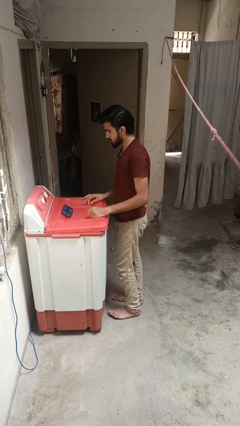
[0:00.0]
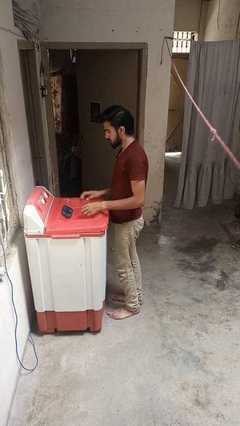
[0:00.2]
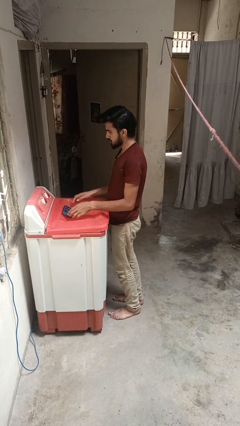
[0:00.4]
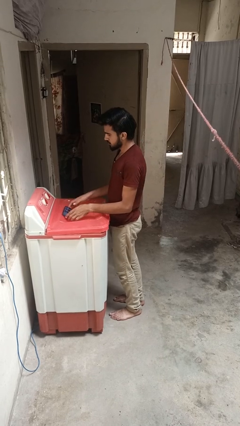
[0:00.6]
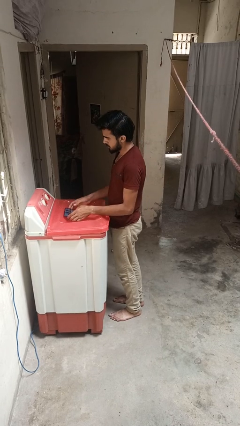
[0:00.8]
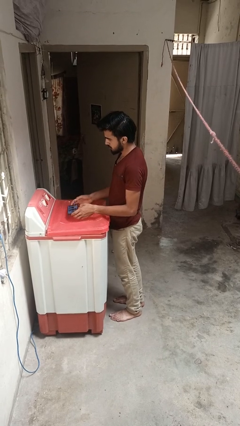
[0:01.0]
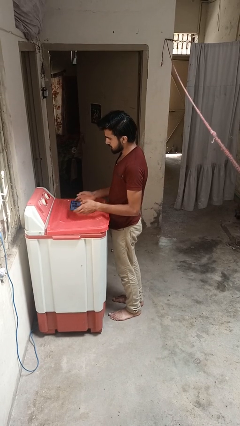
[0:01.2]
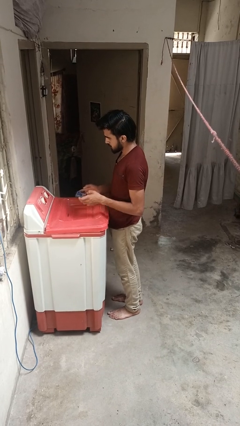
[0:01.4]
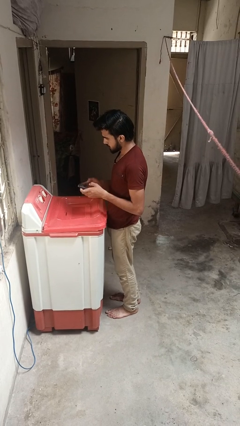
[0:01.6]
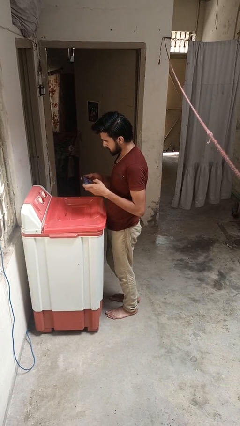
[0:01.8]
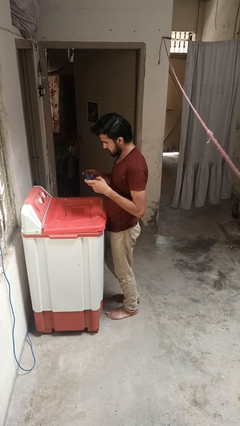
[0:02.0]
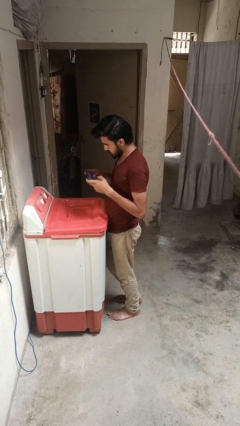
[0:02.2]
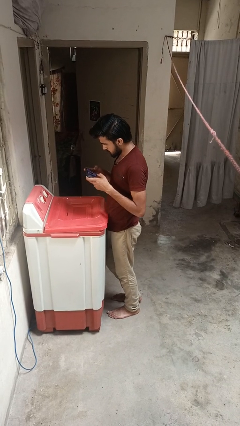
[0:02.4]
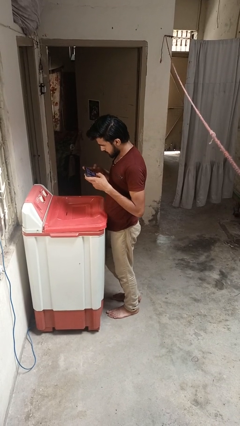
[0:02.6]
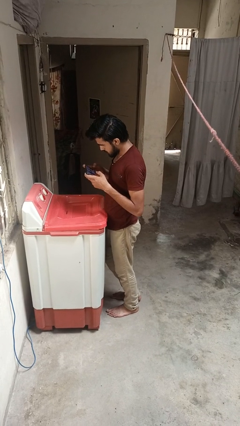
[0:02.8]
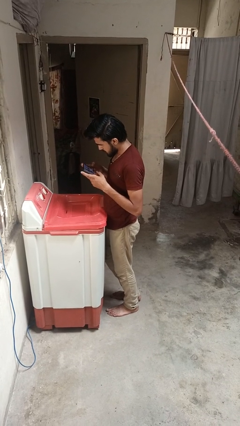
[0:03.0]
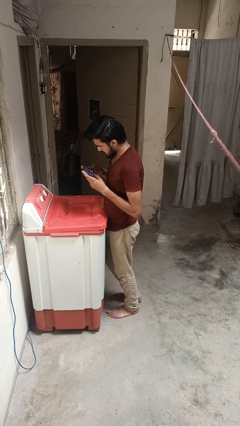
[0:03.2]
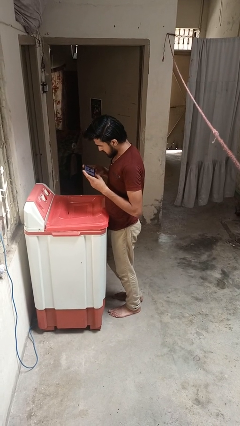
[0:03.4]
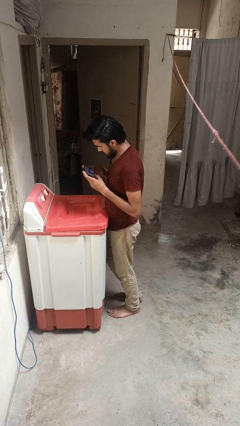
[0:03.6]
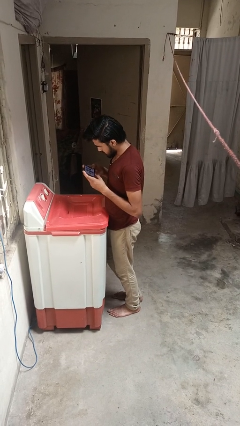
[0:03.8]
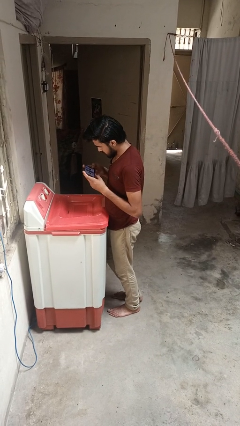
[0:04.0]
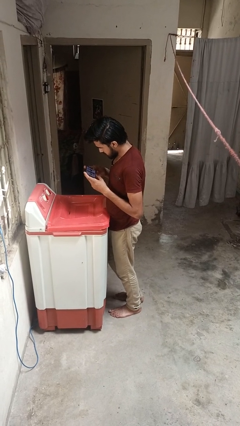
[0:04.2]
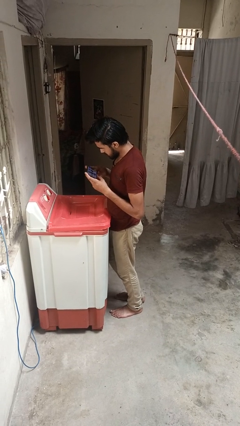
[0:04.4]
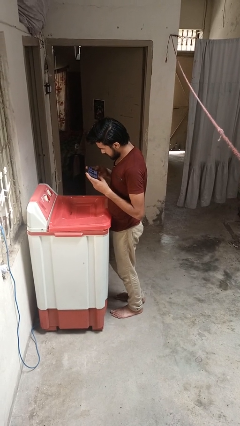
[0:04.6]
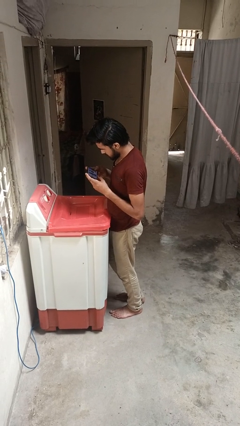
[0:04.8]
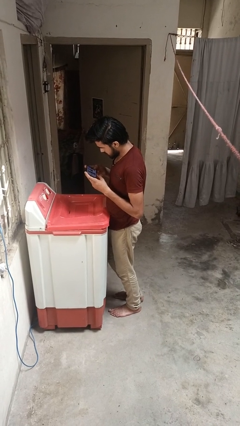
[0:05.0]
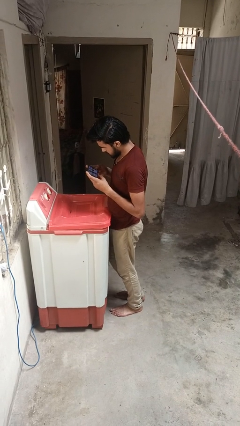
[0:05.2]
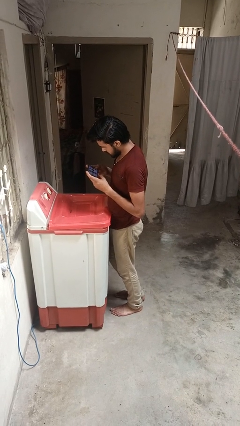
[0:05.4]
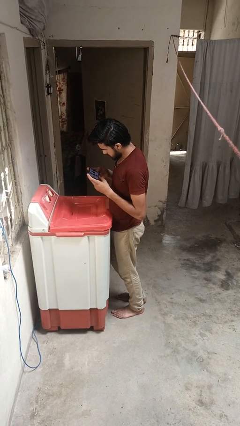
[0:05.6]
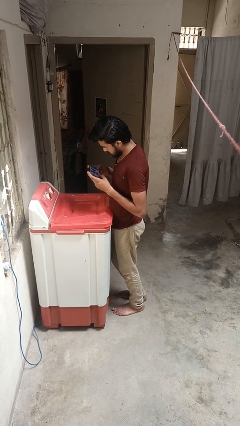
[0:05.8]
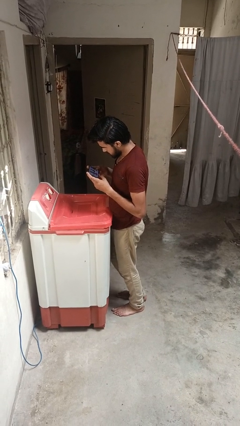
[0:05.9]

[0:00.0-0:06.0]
person interacts with tablet

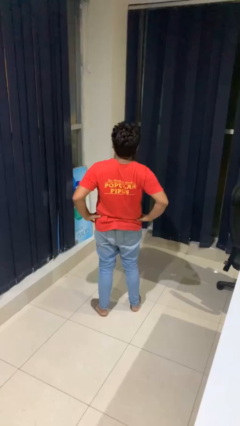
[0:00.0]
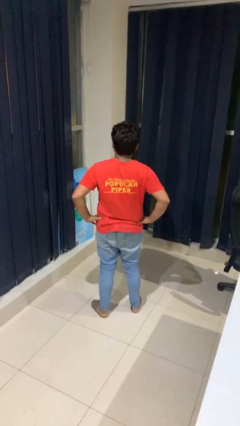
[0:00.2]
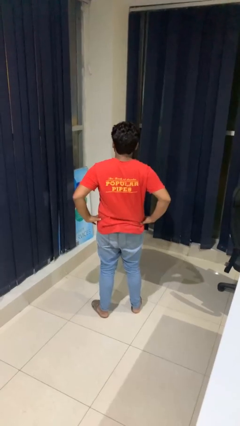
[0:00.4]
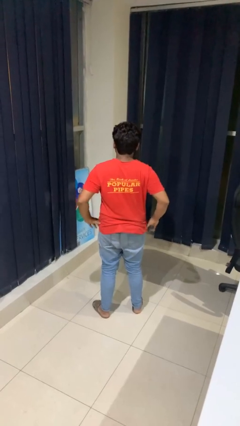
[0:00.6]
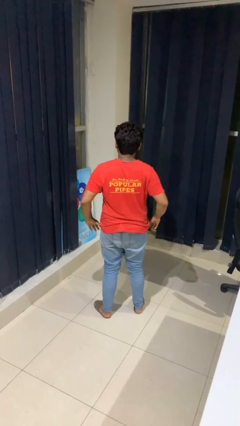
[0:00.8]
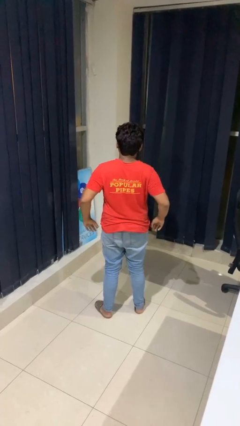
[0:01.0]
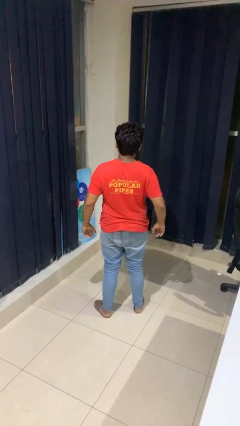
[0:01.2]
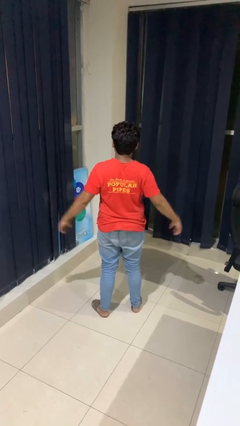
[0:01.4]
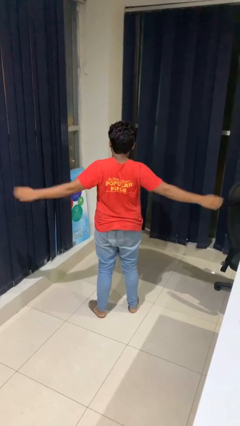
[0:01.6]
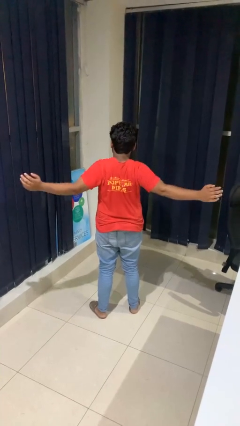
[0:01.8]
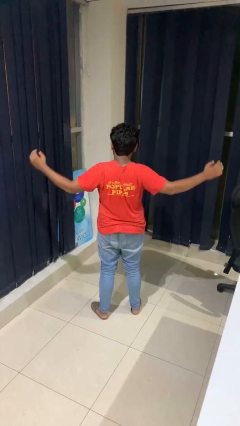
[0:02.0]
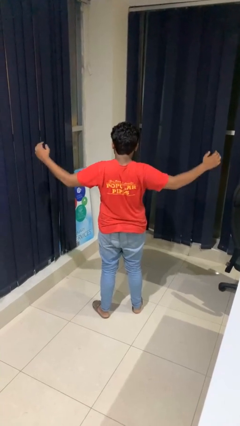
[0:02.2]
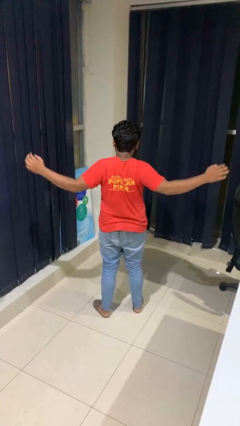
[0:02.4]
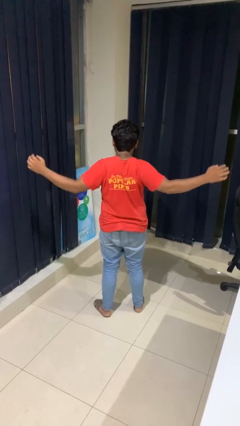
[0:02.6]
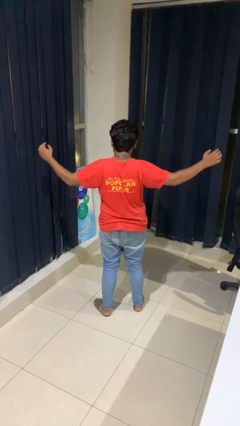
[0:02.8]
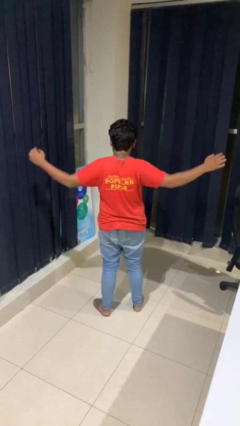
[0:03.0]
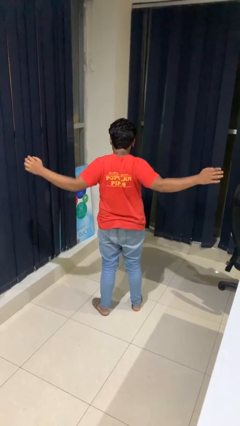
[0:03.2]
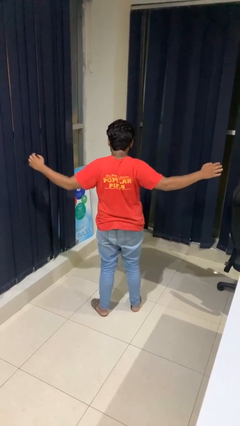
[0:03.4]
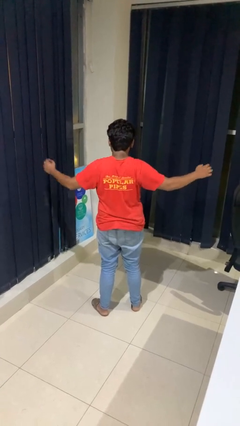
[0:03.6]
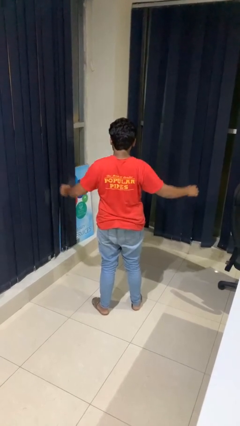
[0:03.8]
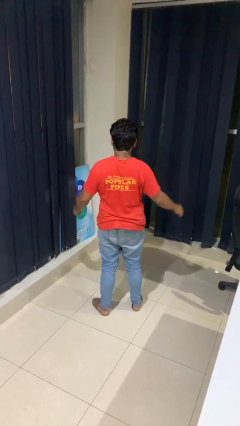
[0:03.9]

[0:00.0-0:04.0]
person stretches arms to side

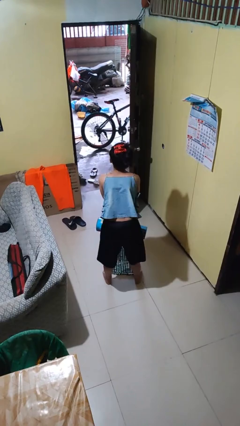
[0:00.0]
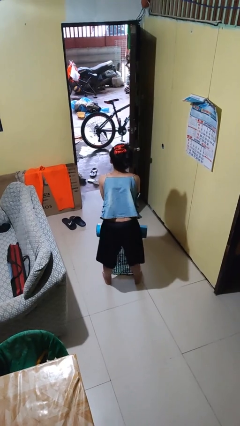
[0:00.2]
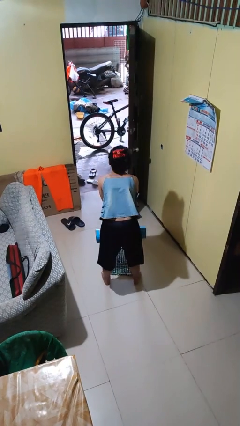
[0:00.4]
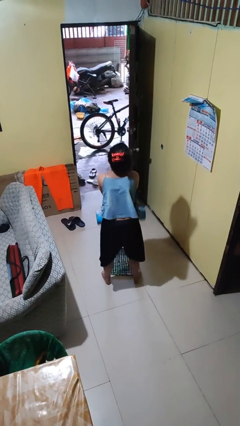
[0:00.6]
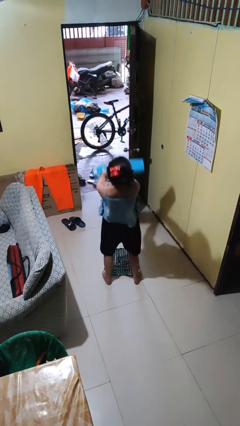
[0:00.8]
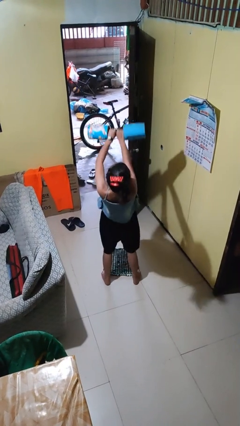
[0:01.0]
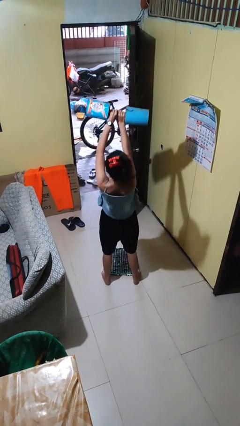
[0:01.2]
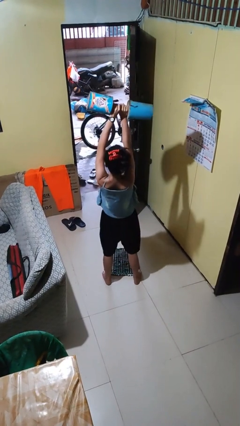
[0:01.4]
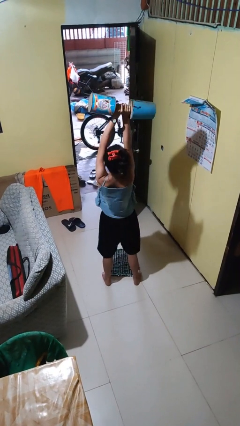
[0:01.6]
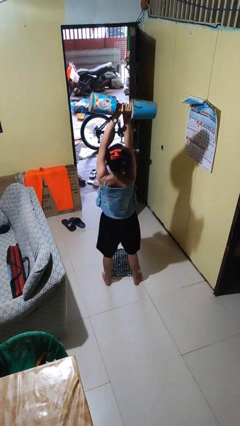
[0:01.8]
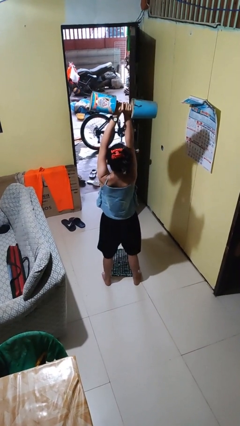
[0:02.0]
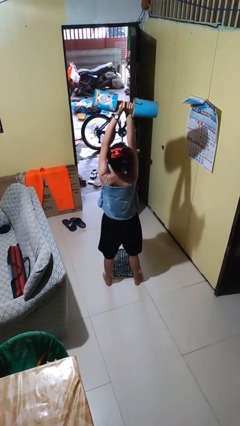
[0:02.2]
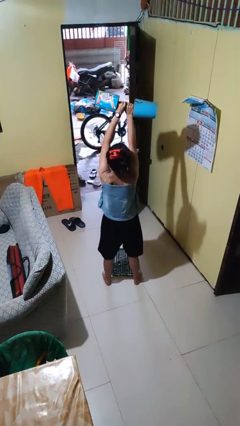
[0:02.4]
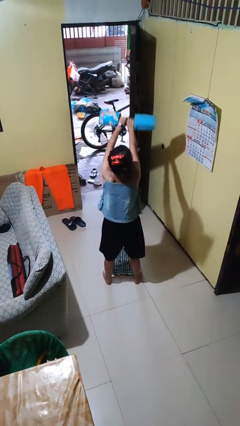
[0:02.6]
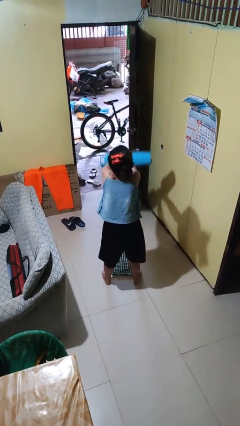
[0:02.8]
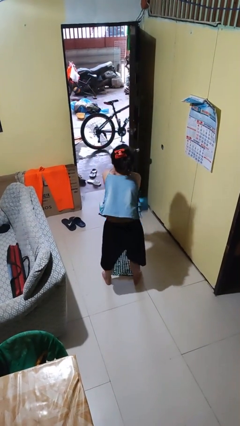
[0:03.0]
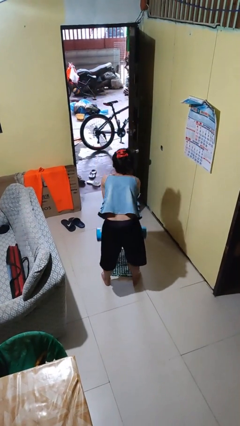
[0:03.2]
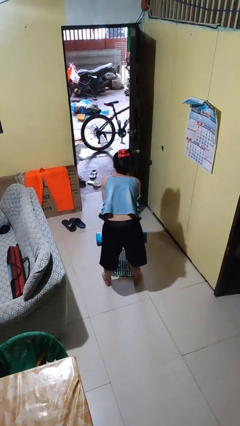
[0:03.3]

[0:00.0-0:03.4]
person lifts dumbbells

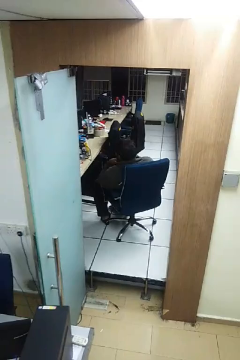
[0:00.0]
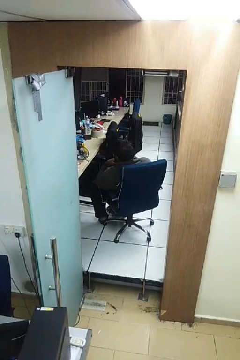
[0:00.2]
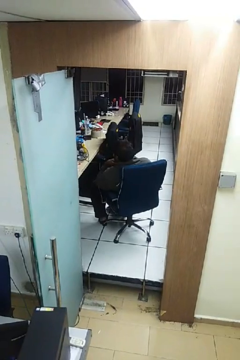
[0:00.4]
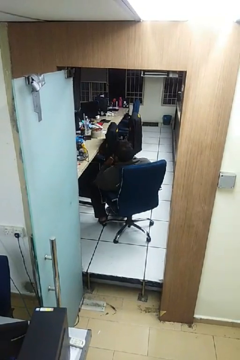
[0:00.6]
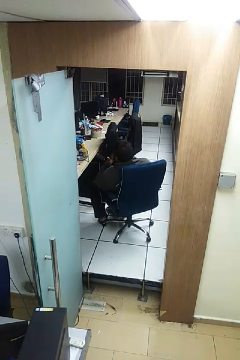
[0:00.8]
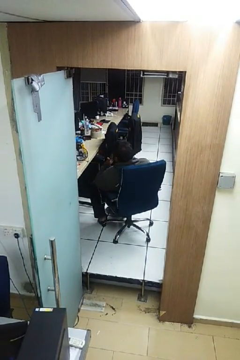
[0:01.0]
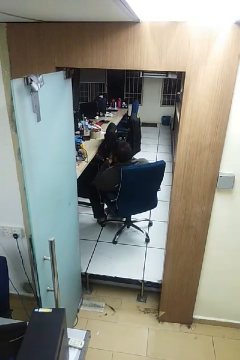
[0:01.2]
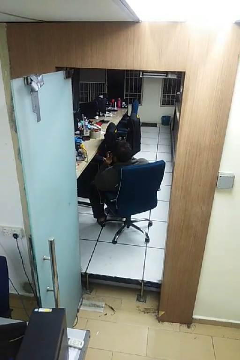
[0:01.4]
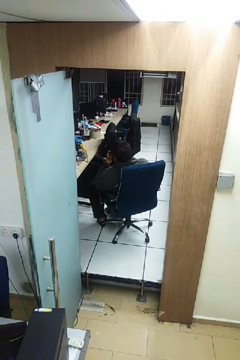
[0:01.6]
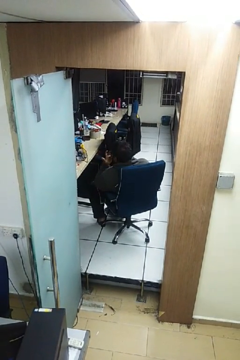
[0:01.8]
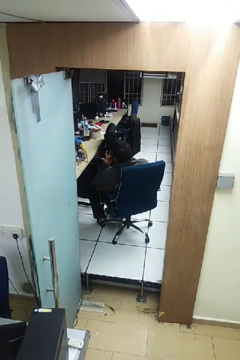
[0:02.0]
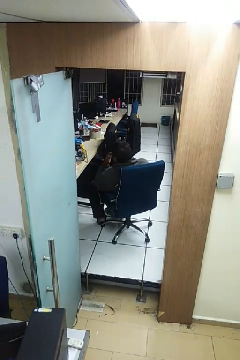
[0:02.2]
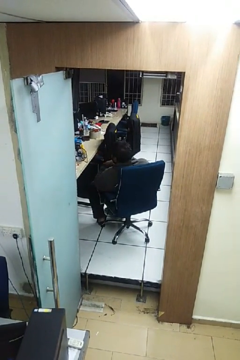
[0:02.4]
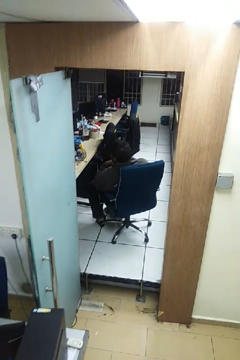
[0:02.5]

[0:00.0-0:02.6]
person licks fingers

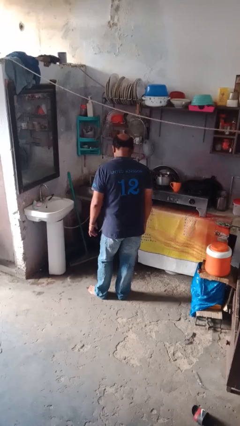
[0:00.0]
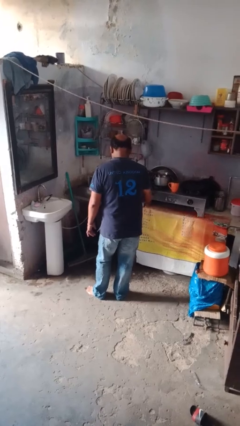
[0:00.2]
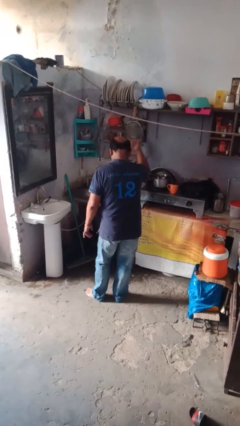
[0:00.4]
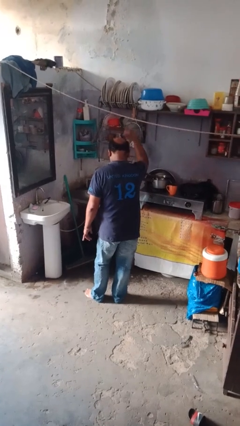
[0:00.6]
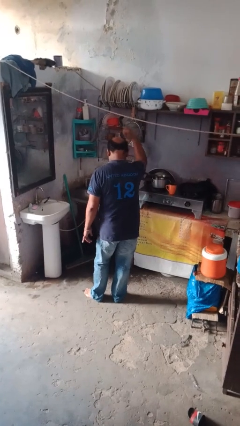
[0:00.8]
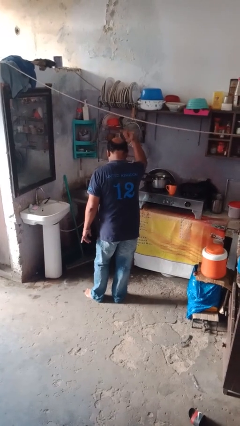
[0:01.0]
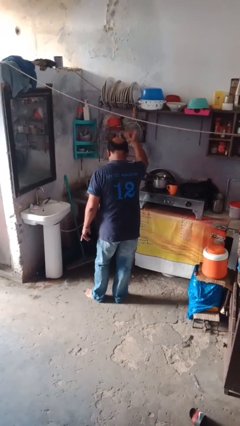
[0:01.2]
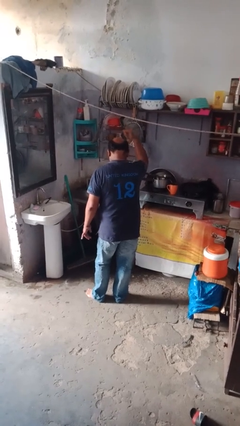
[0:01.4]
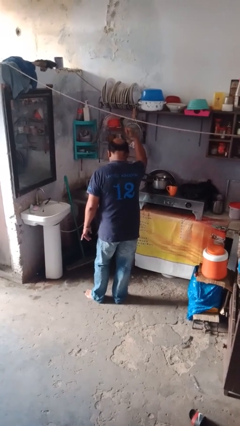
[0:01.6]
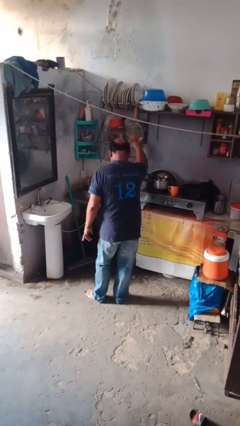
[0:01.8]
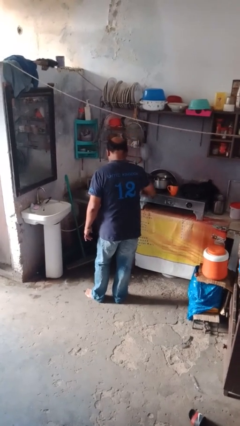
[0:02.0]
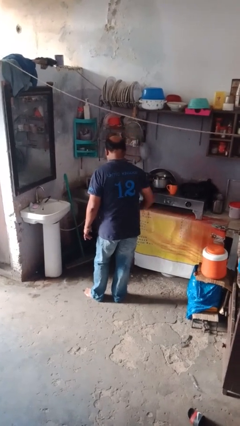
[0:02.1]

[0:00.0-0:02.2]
person gestures hang loose
